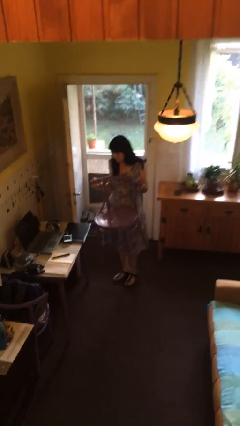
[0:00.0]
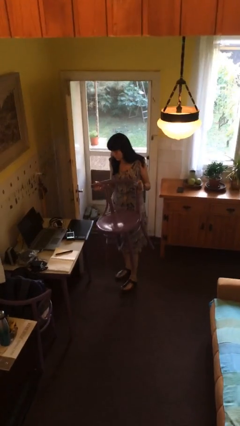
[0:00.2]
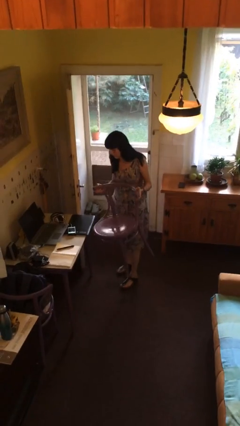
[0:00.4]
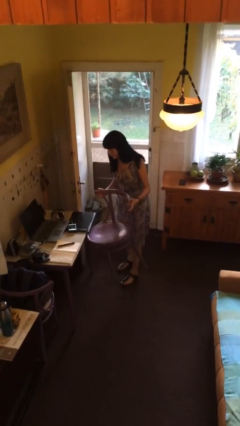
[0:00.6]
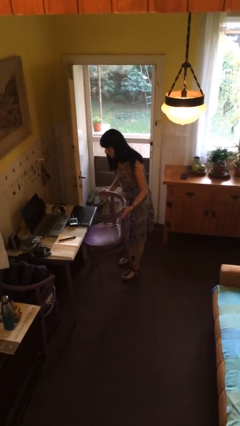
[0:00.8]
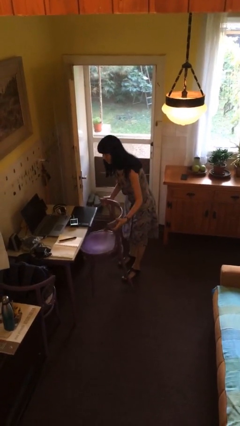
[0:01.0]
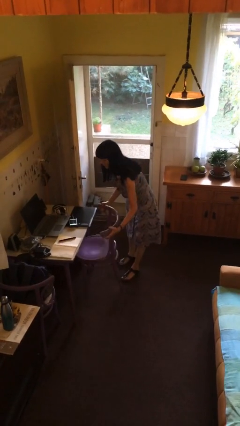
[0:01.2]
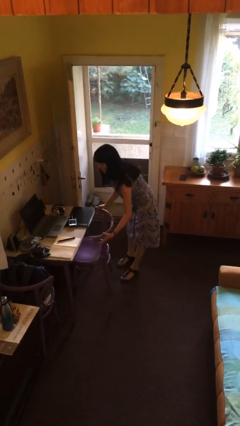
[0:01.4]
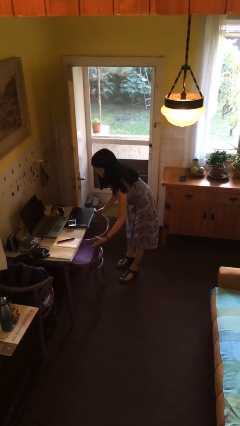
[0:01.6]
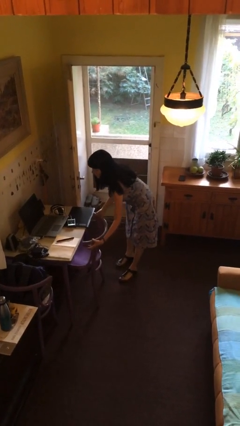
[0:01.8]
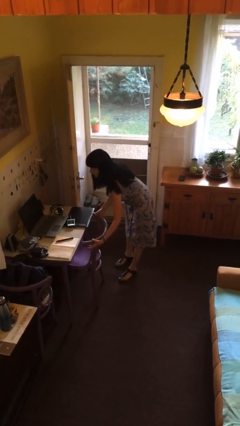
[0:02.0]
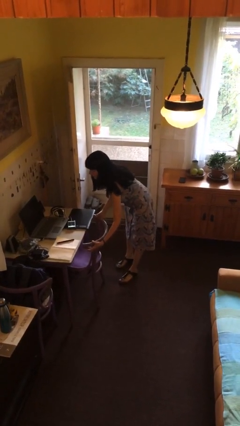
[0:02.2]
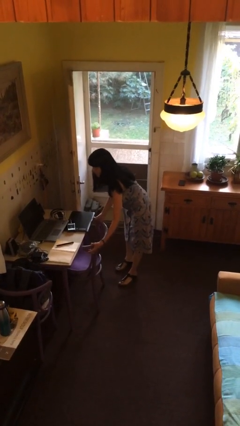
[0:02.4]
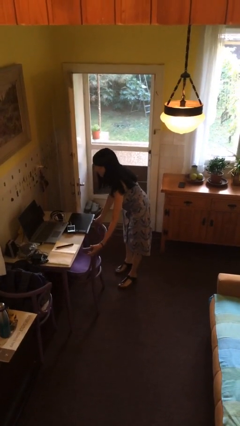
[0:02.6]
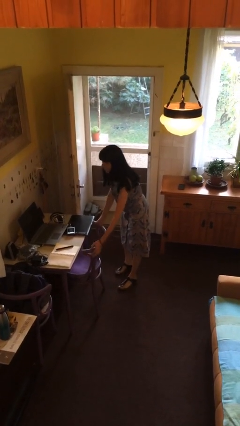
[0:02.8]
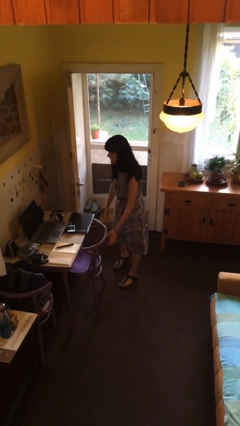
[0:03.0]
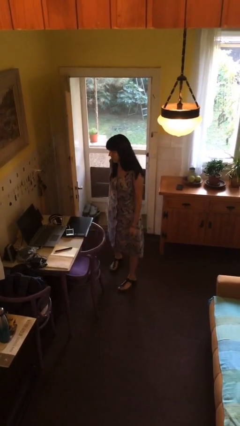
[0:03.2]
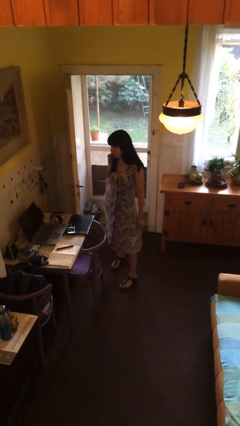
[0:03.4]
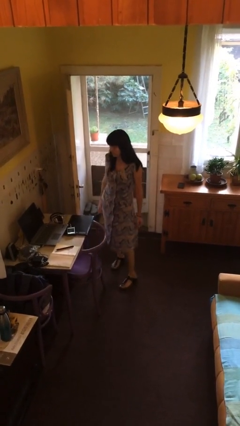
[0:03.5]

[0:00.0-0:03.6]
person puts down object on floor

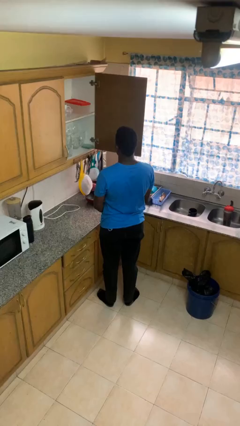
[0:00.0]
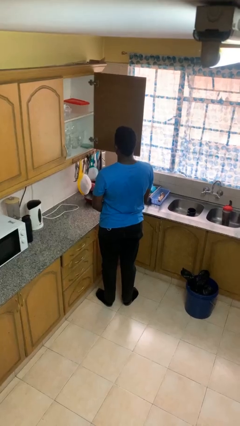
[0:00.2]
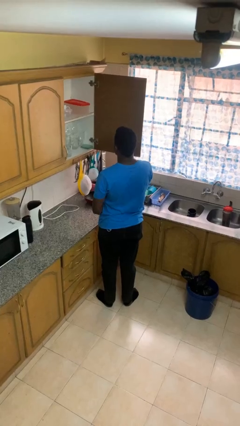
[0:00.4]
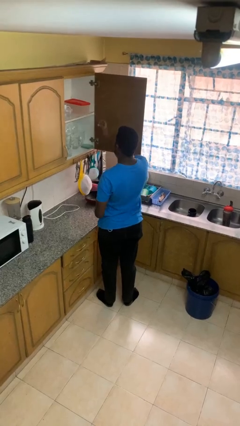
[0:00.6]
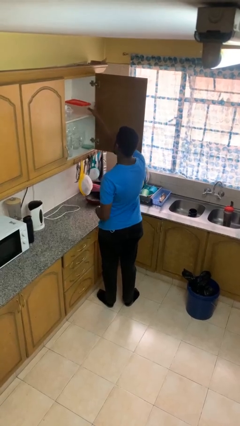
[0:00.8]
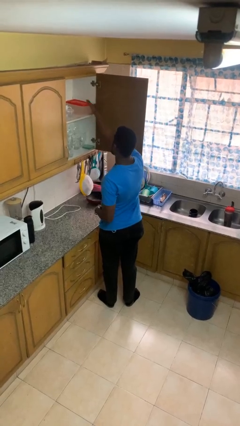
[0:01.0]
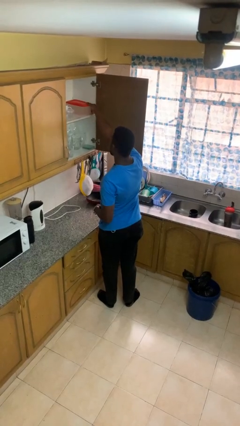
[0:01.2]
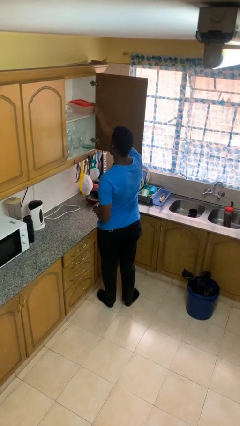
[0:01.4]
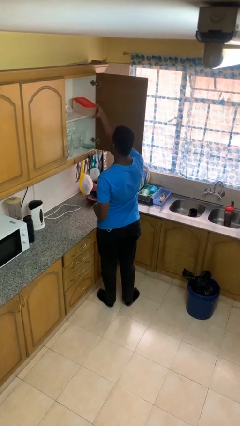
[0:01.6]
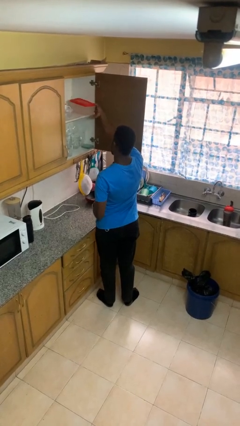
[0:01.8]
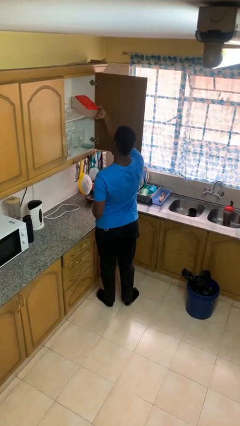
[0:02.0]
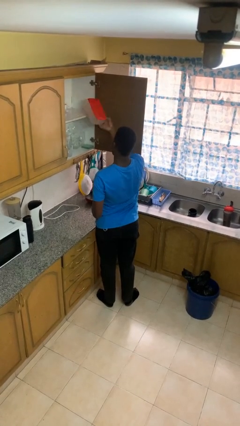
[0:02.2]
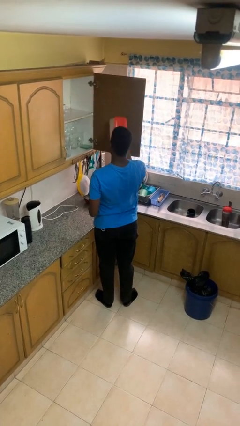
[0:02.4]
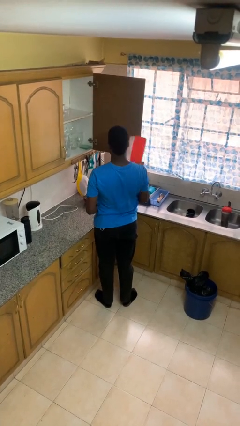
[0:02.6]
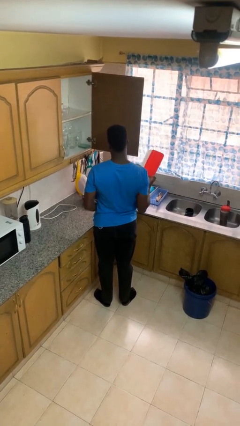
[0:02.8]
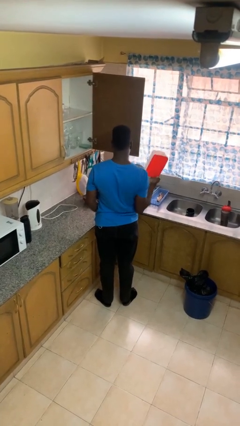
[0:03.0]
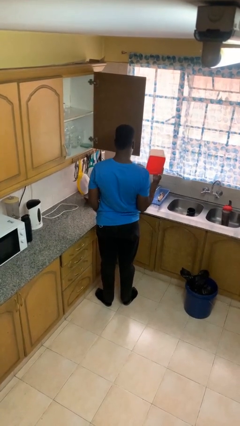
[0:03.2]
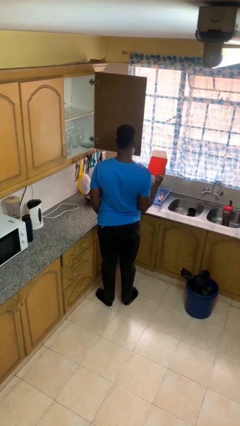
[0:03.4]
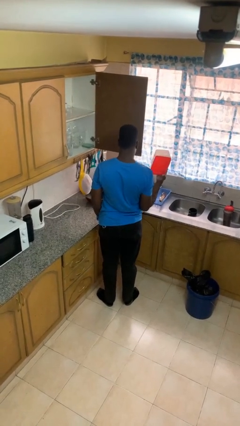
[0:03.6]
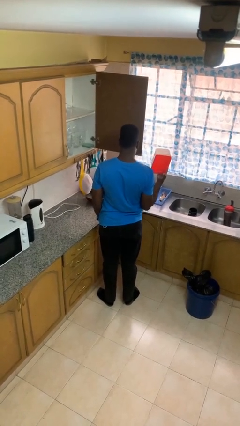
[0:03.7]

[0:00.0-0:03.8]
person picks up object from cabinet

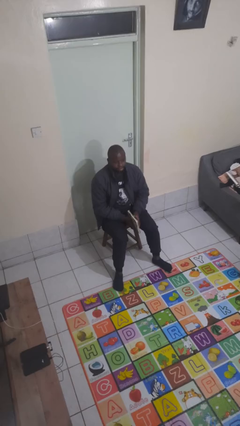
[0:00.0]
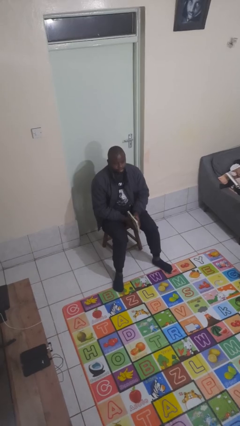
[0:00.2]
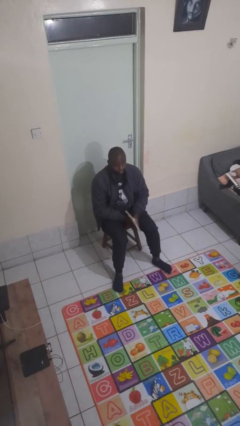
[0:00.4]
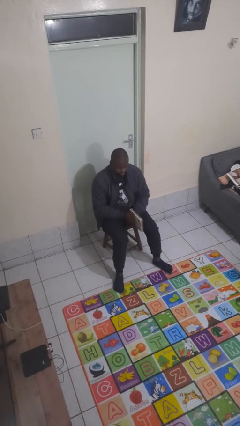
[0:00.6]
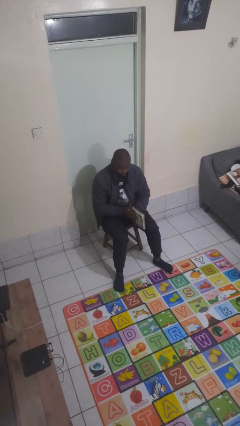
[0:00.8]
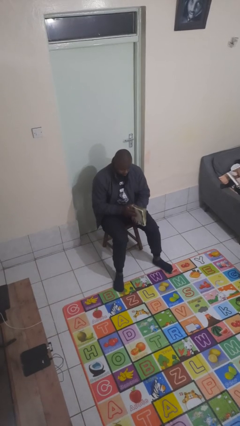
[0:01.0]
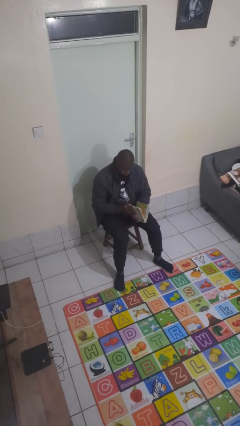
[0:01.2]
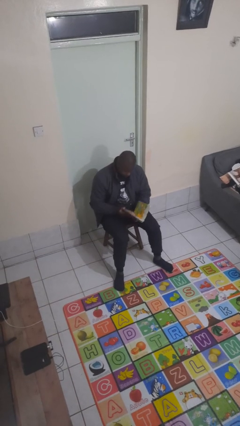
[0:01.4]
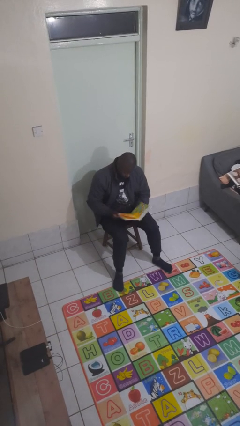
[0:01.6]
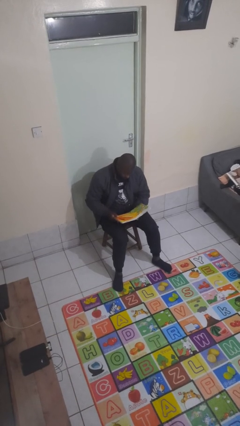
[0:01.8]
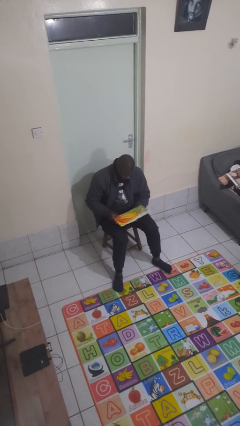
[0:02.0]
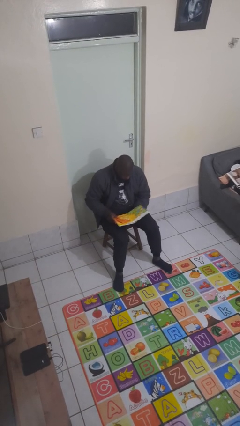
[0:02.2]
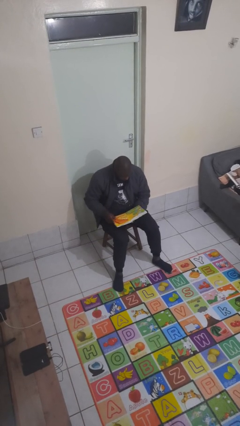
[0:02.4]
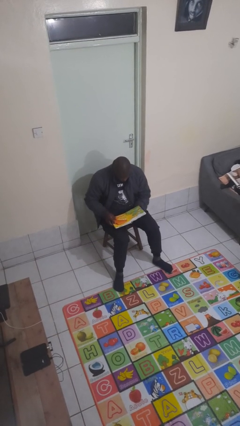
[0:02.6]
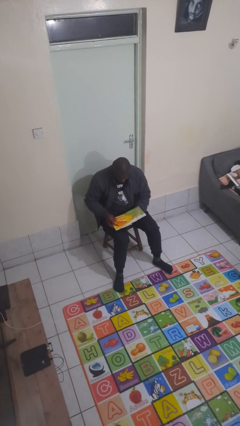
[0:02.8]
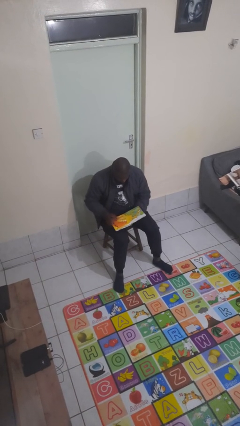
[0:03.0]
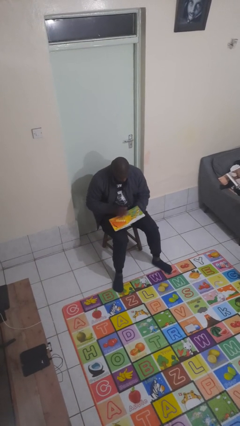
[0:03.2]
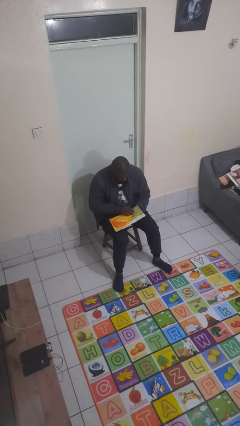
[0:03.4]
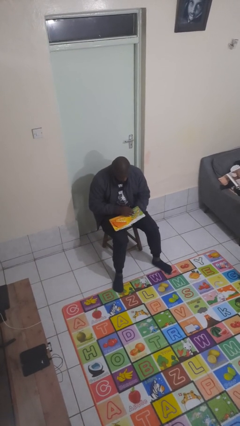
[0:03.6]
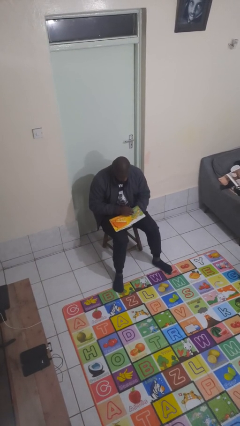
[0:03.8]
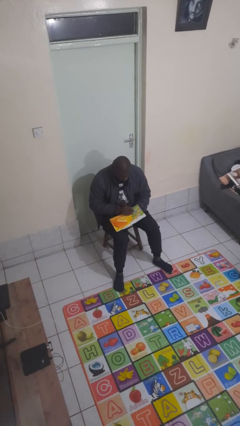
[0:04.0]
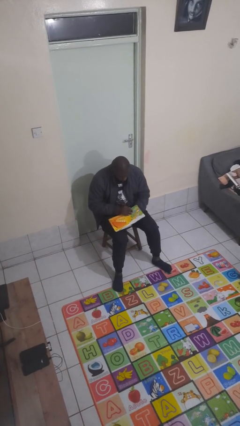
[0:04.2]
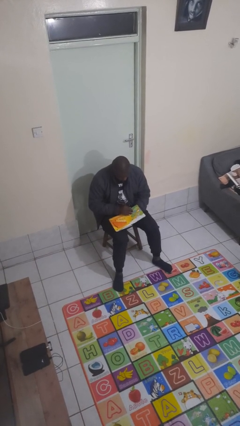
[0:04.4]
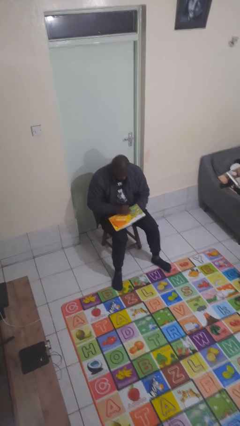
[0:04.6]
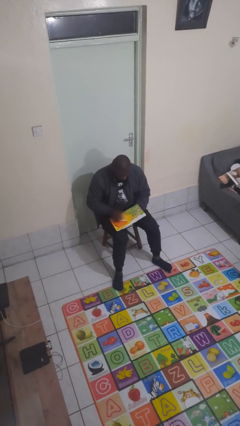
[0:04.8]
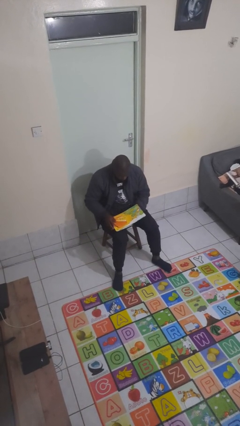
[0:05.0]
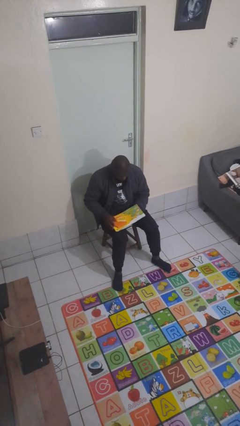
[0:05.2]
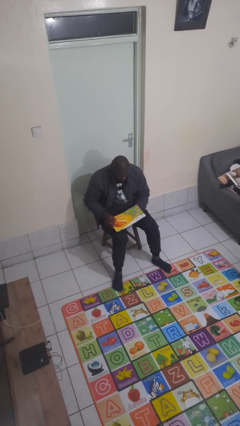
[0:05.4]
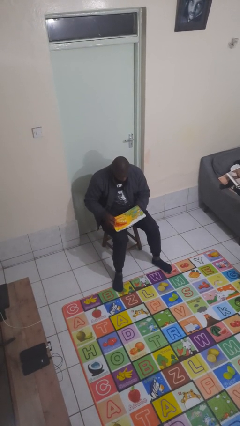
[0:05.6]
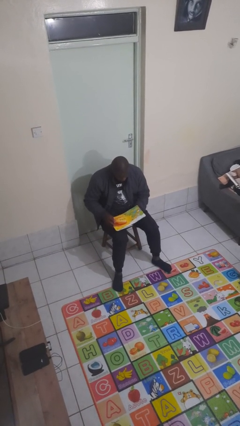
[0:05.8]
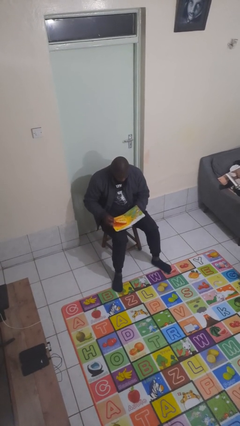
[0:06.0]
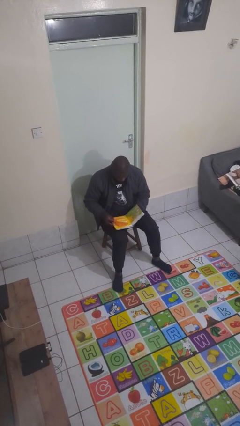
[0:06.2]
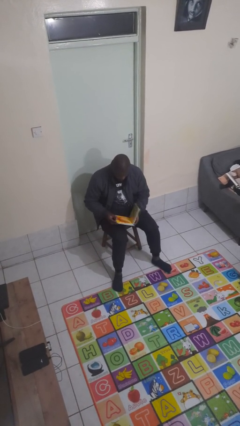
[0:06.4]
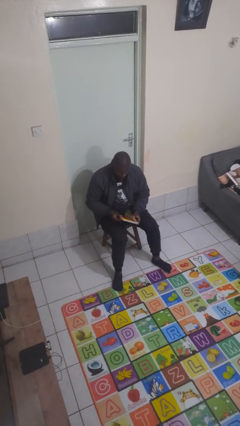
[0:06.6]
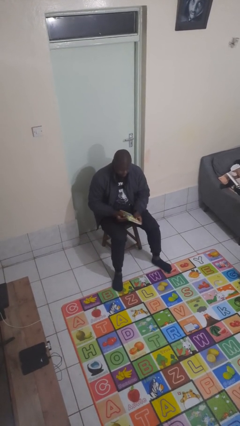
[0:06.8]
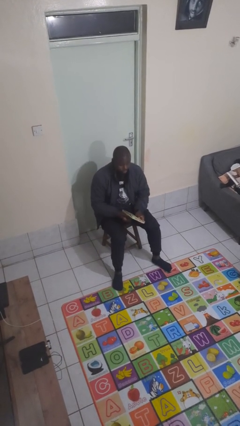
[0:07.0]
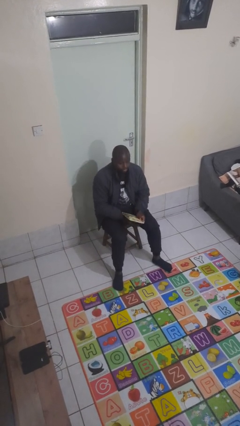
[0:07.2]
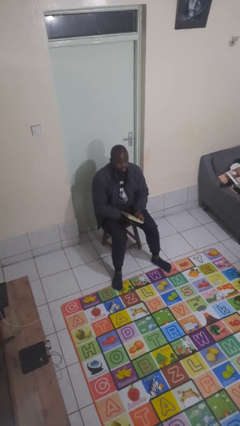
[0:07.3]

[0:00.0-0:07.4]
person reads book

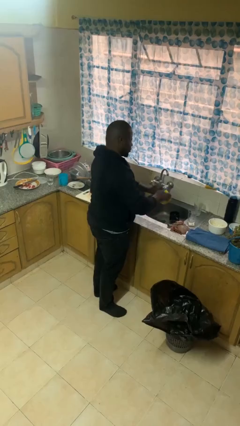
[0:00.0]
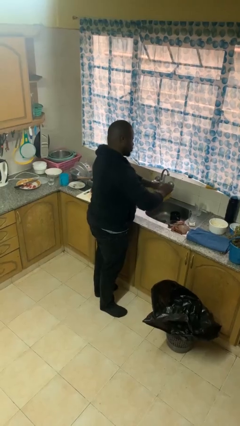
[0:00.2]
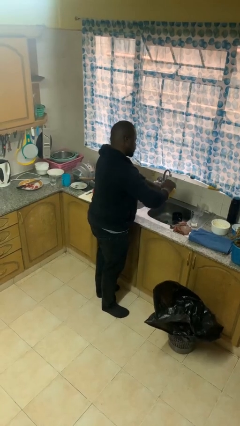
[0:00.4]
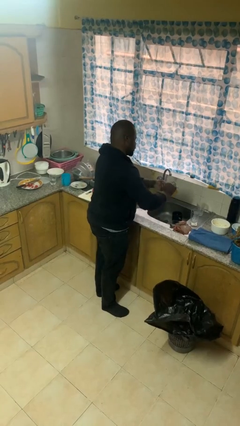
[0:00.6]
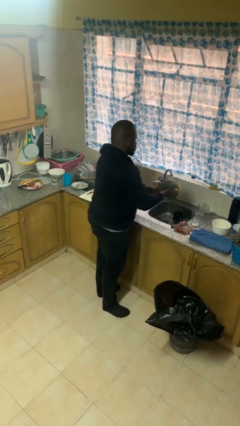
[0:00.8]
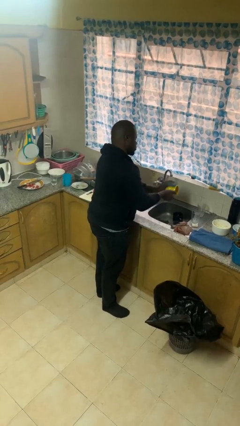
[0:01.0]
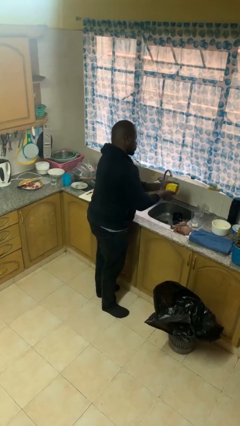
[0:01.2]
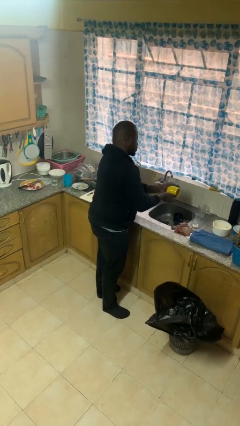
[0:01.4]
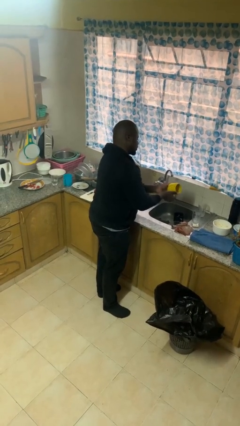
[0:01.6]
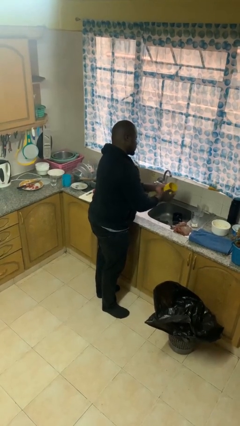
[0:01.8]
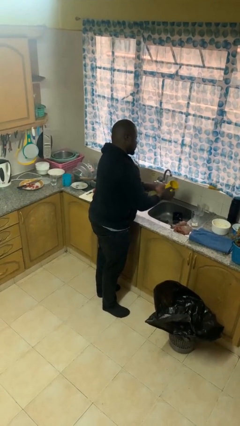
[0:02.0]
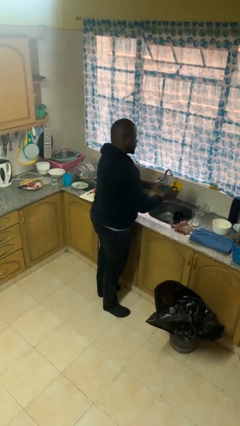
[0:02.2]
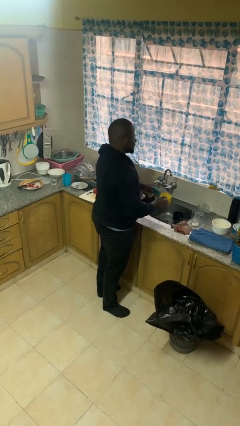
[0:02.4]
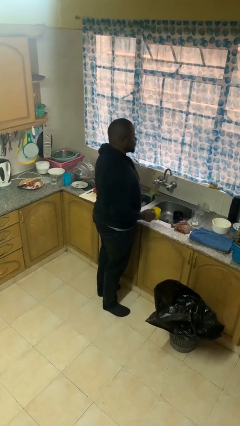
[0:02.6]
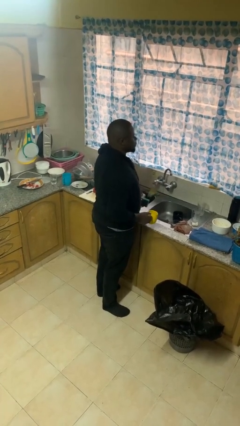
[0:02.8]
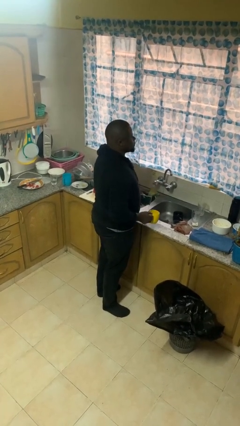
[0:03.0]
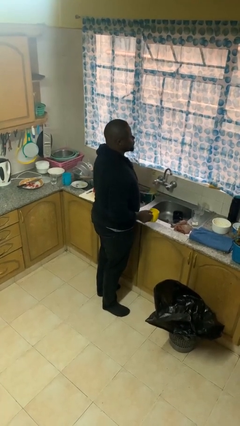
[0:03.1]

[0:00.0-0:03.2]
person washes dish

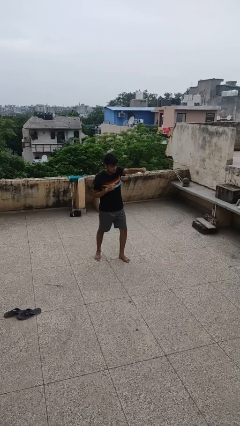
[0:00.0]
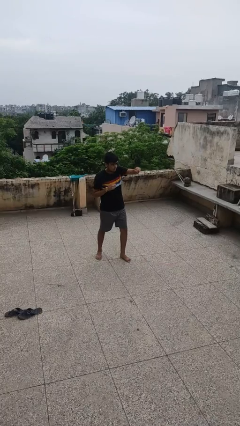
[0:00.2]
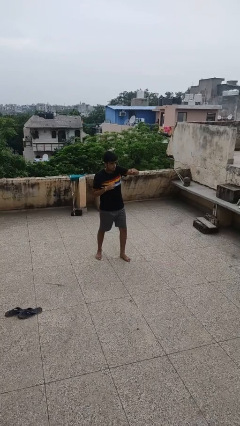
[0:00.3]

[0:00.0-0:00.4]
person punches
